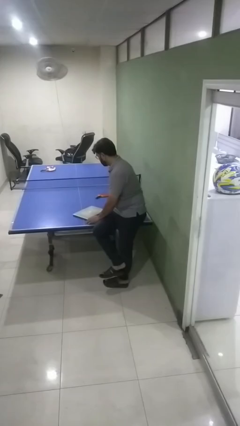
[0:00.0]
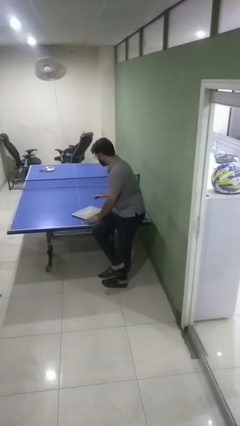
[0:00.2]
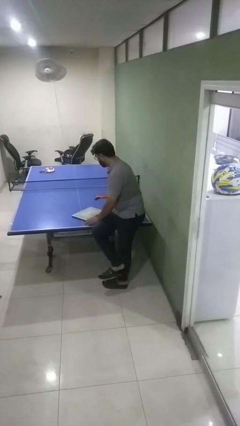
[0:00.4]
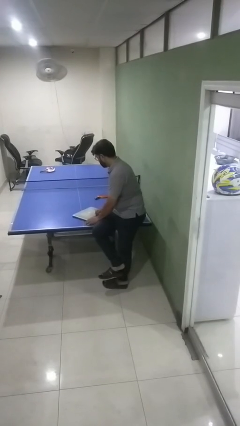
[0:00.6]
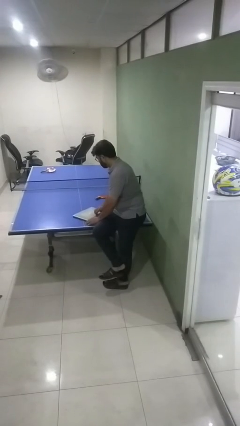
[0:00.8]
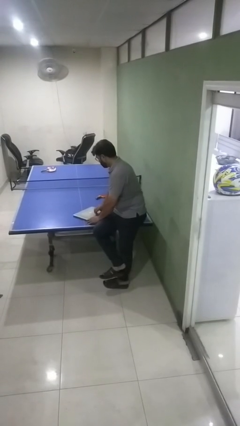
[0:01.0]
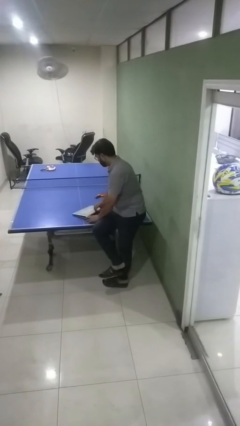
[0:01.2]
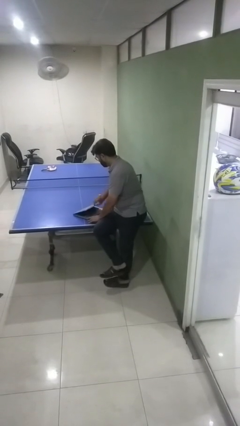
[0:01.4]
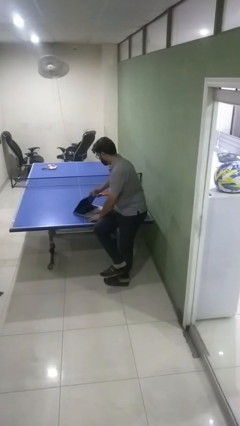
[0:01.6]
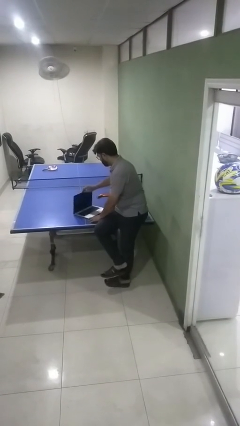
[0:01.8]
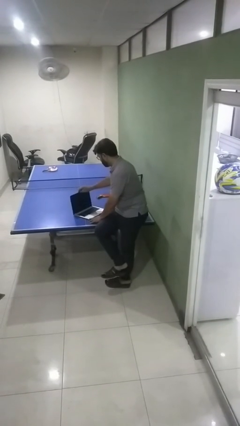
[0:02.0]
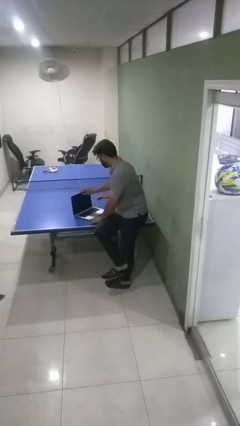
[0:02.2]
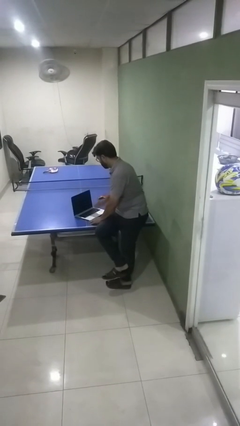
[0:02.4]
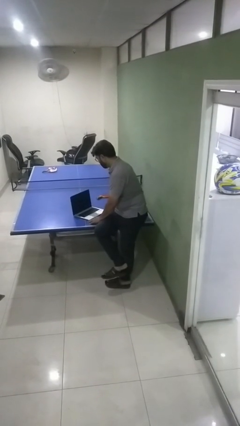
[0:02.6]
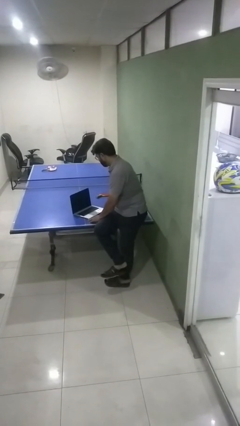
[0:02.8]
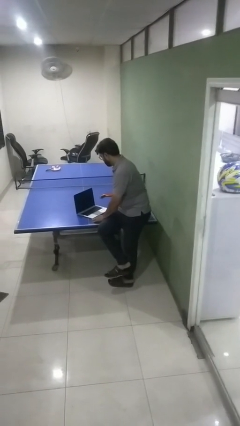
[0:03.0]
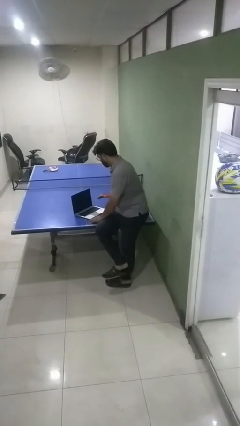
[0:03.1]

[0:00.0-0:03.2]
person opens laptop

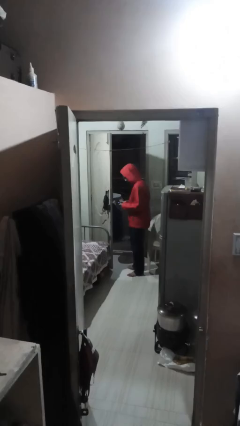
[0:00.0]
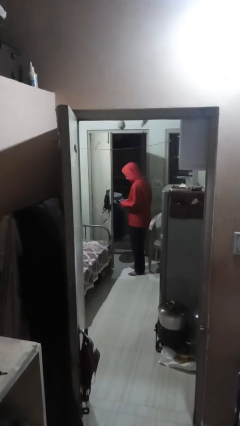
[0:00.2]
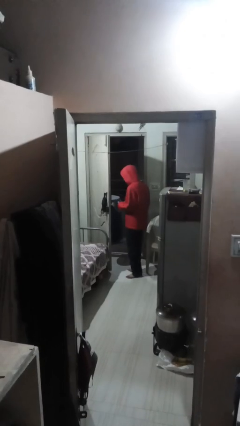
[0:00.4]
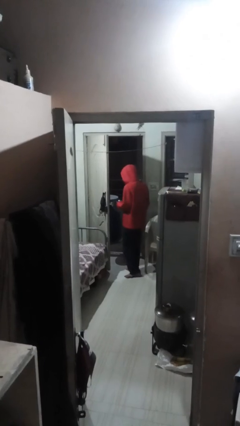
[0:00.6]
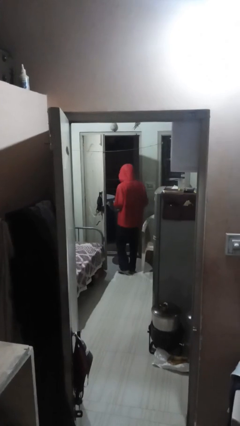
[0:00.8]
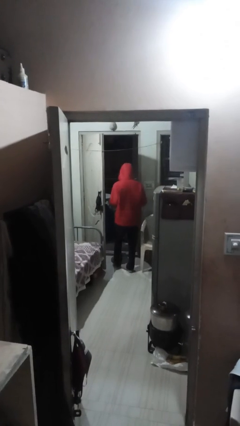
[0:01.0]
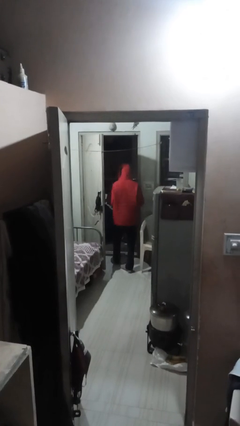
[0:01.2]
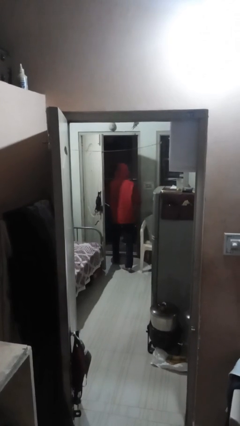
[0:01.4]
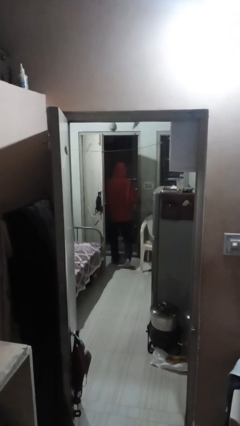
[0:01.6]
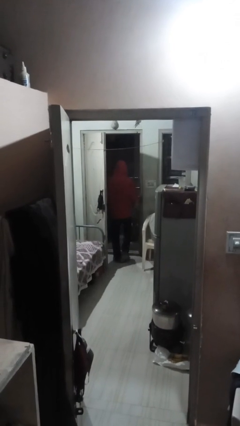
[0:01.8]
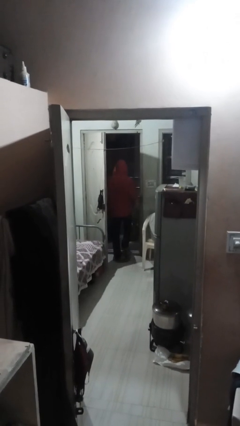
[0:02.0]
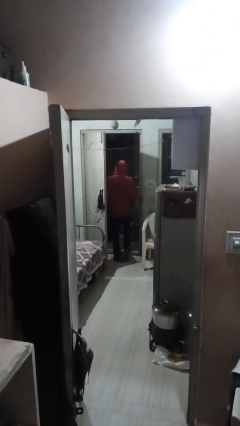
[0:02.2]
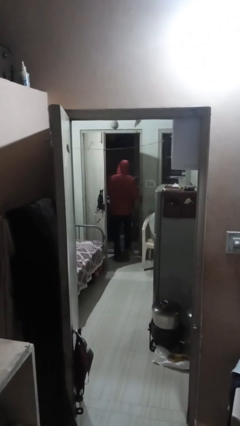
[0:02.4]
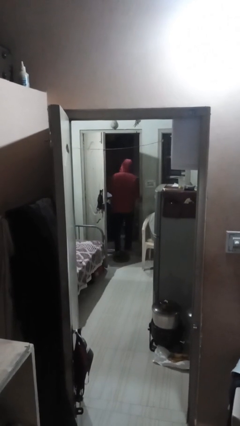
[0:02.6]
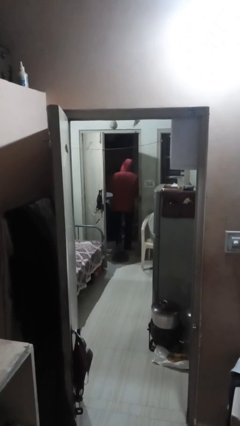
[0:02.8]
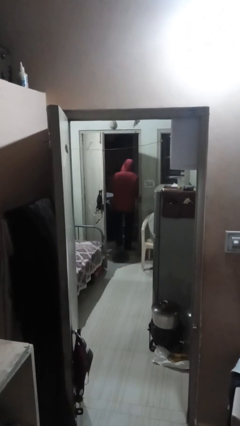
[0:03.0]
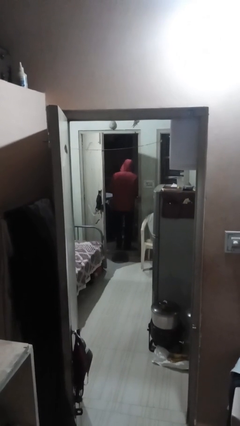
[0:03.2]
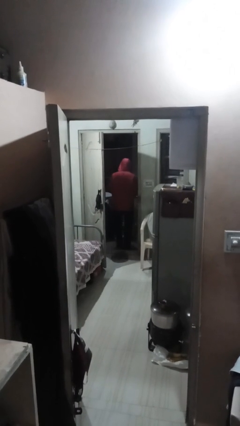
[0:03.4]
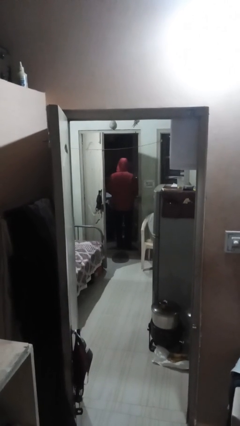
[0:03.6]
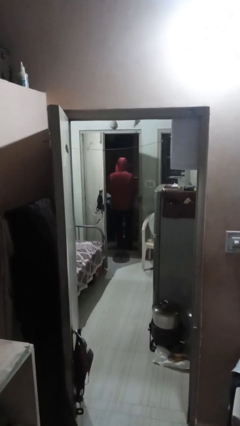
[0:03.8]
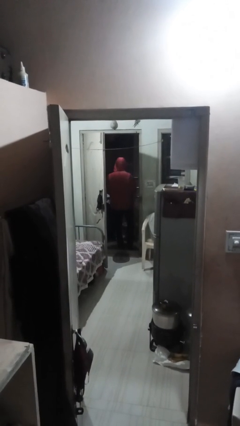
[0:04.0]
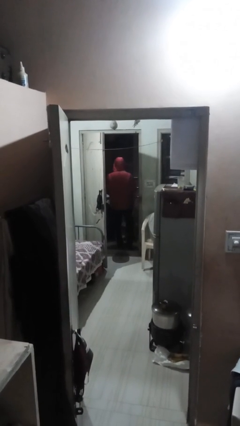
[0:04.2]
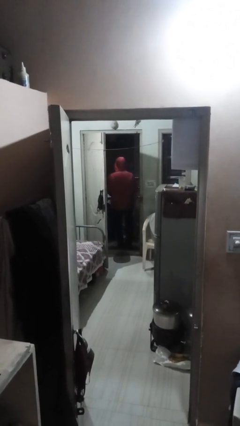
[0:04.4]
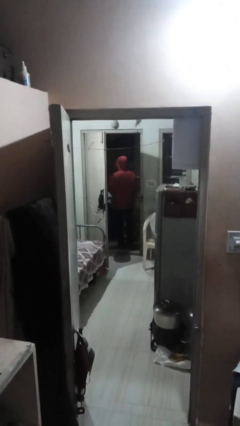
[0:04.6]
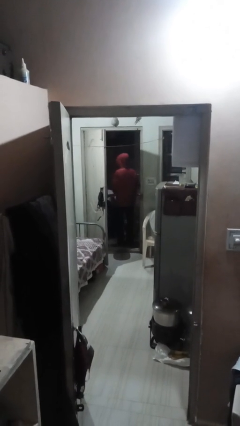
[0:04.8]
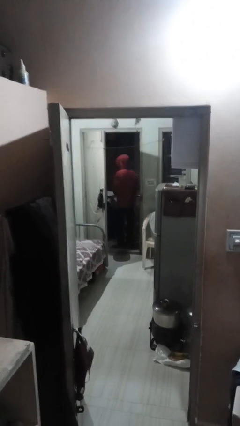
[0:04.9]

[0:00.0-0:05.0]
person exits scene through structure

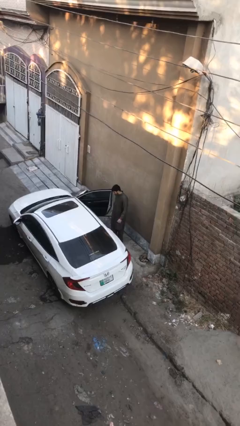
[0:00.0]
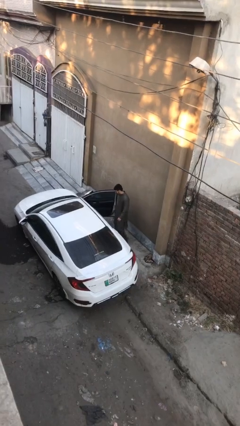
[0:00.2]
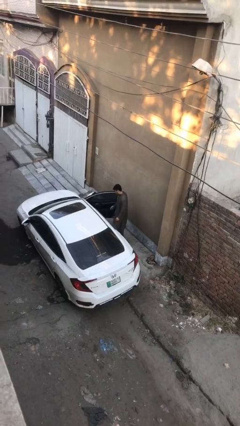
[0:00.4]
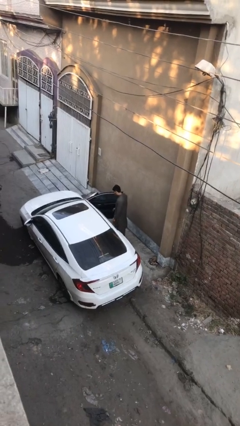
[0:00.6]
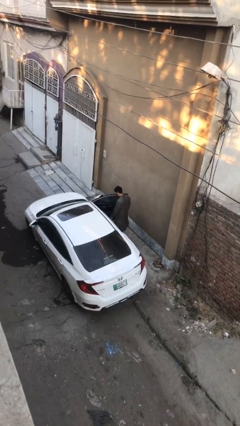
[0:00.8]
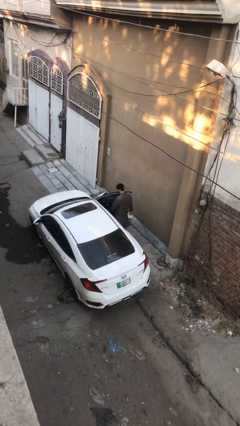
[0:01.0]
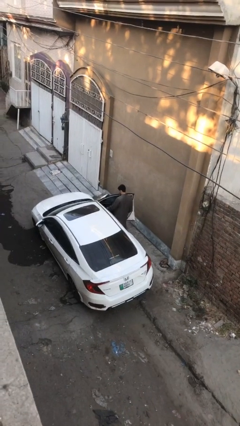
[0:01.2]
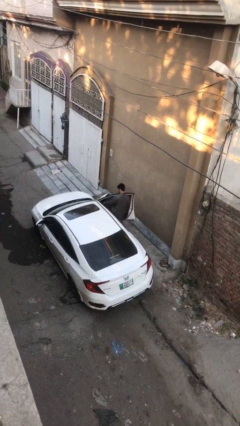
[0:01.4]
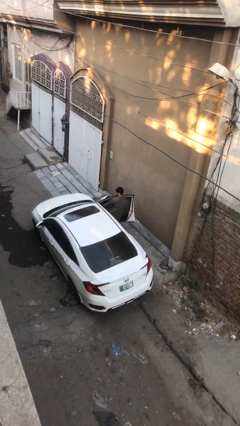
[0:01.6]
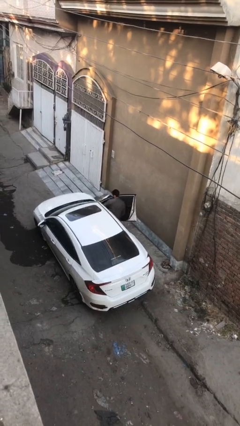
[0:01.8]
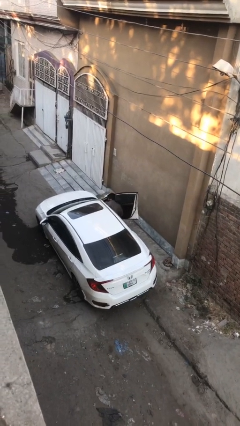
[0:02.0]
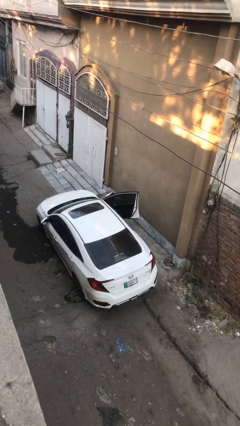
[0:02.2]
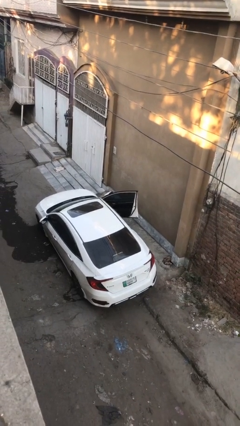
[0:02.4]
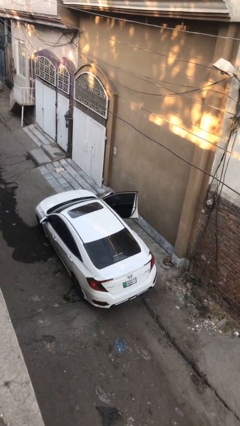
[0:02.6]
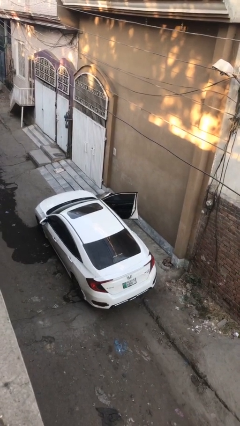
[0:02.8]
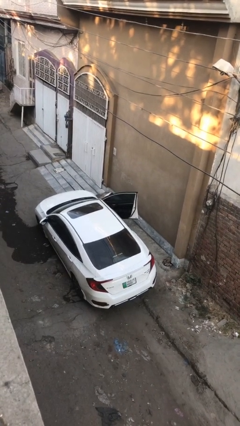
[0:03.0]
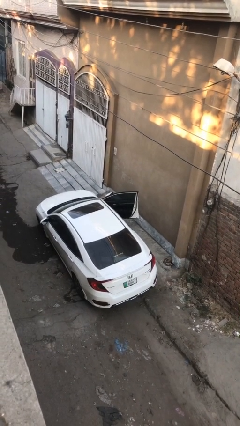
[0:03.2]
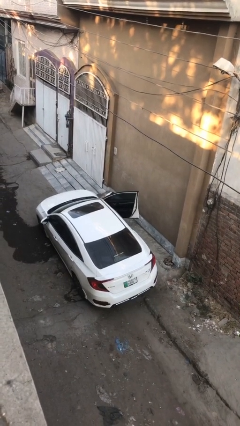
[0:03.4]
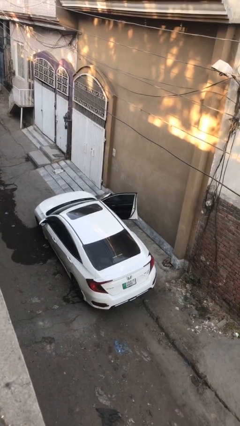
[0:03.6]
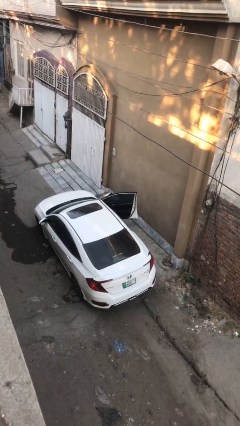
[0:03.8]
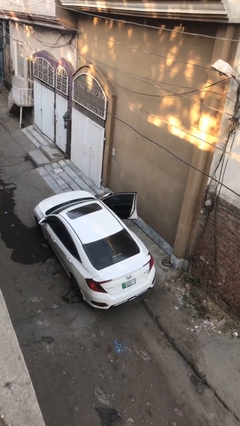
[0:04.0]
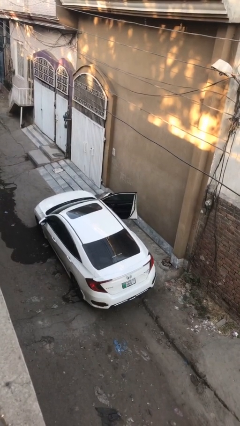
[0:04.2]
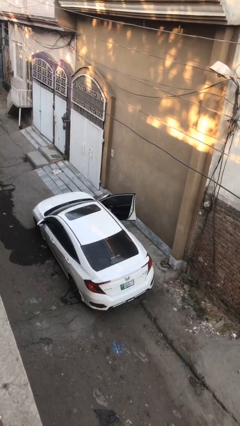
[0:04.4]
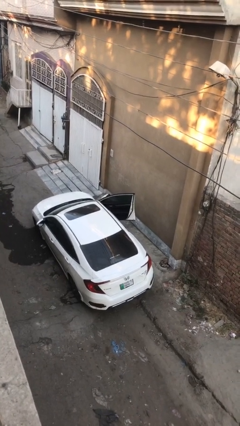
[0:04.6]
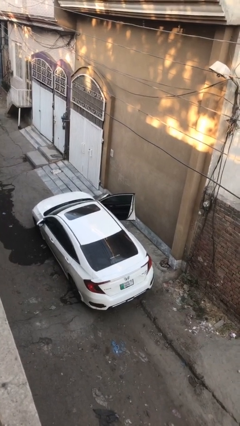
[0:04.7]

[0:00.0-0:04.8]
person enters car

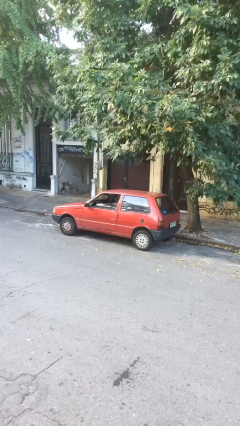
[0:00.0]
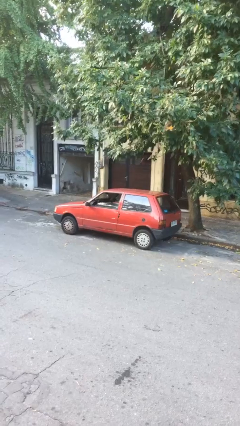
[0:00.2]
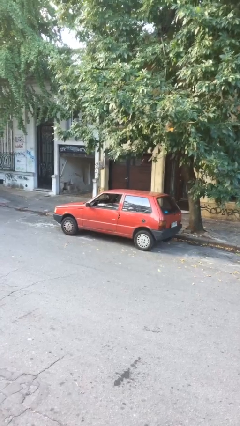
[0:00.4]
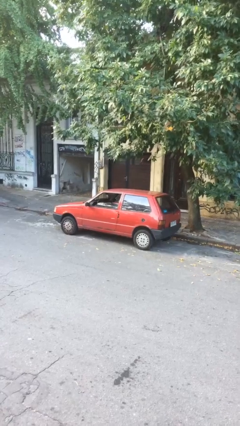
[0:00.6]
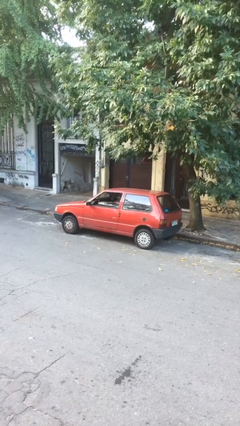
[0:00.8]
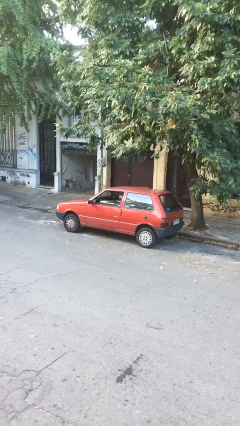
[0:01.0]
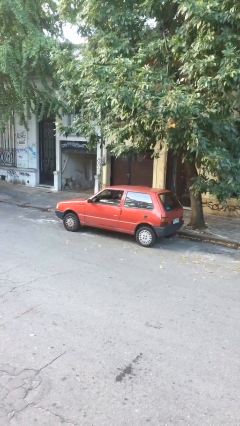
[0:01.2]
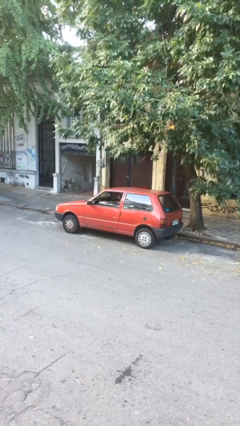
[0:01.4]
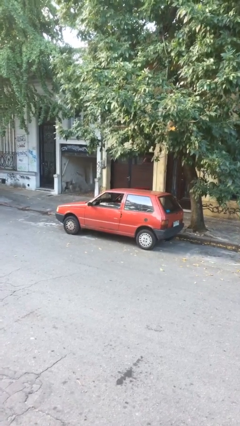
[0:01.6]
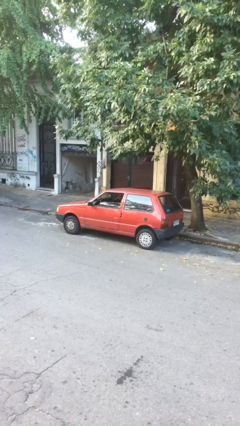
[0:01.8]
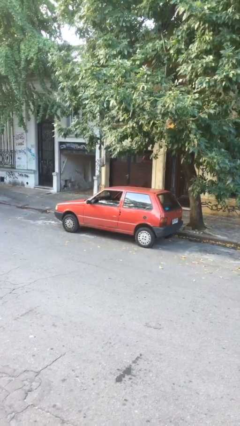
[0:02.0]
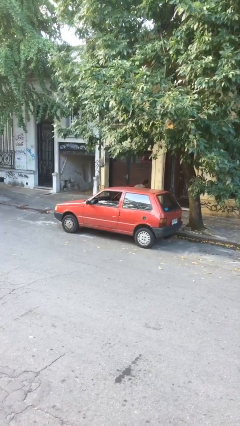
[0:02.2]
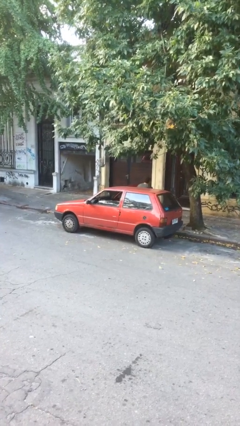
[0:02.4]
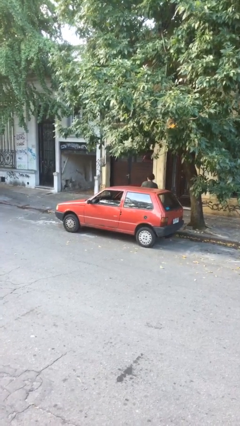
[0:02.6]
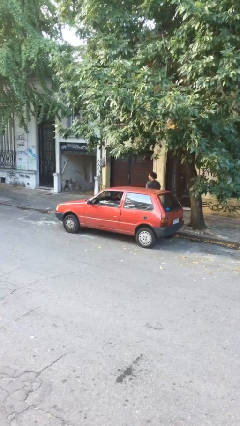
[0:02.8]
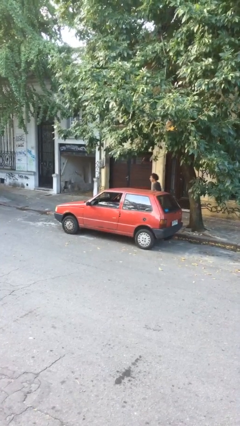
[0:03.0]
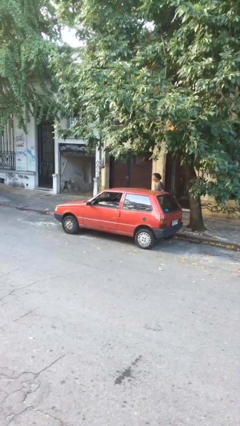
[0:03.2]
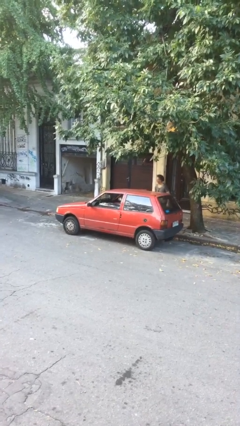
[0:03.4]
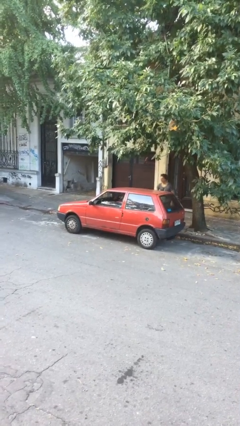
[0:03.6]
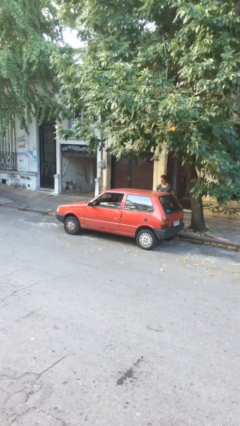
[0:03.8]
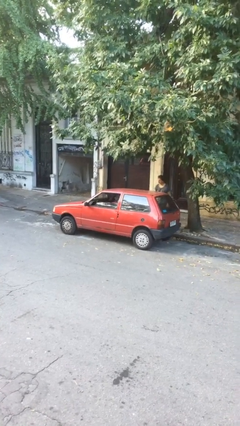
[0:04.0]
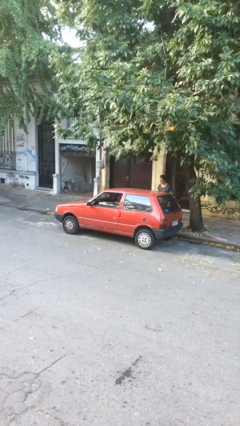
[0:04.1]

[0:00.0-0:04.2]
car drops off person

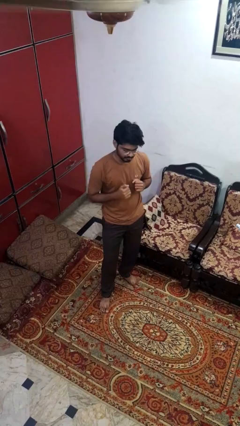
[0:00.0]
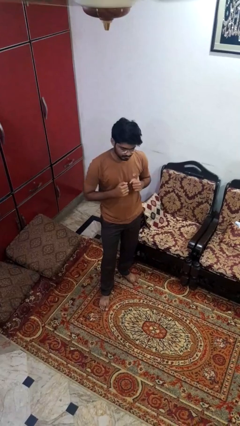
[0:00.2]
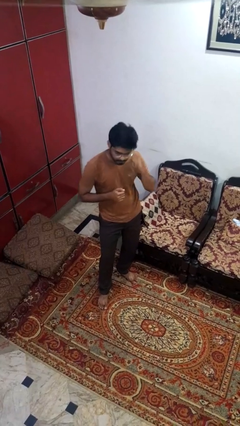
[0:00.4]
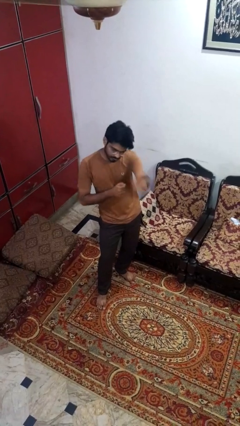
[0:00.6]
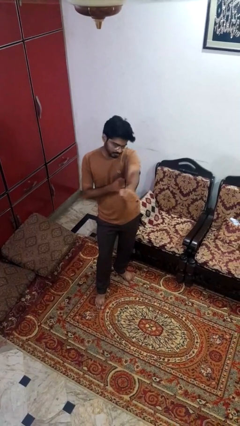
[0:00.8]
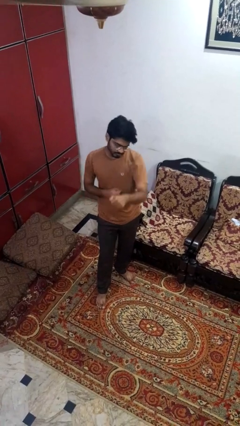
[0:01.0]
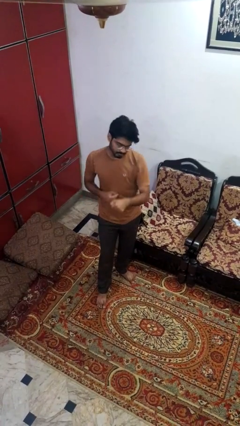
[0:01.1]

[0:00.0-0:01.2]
person punches
